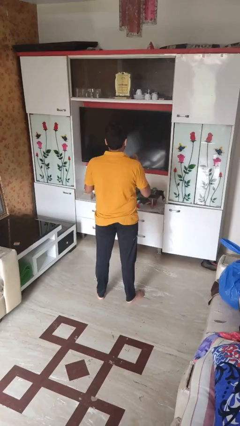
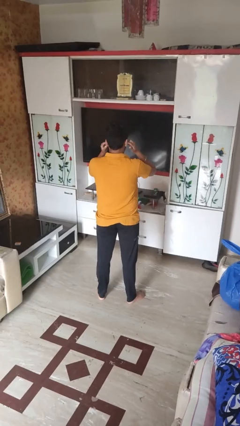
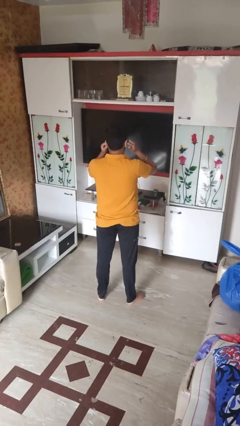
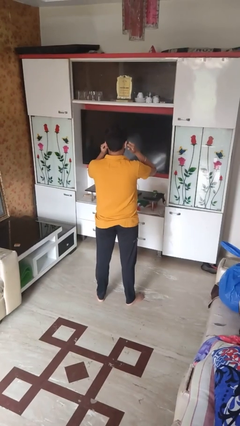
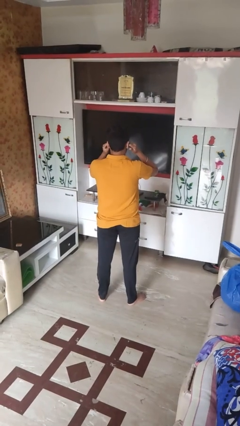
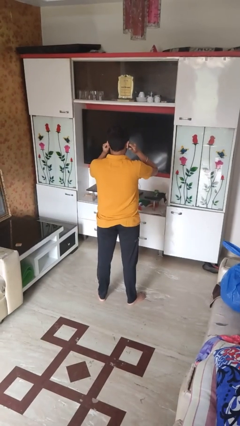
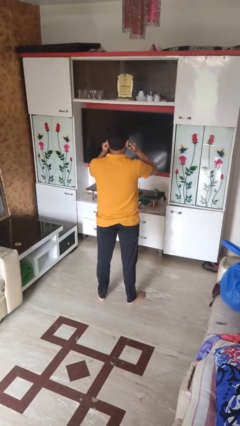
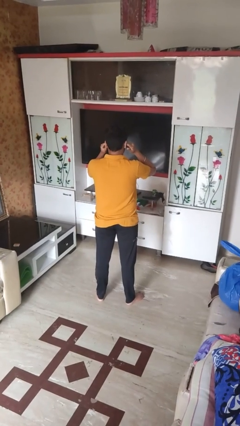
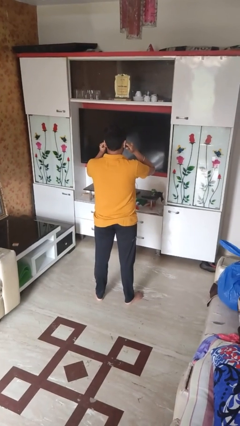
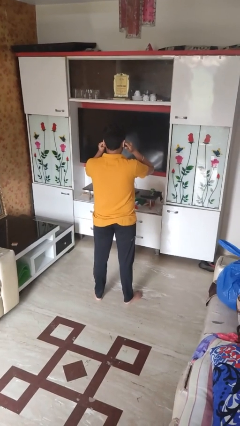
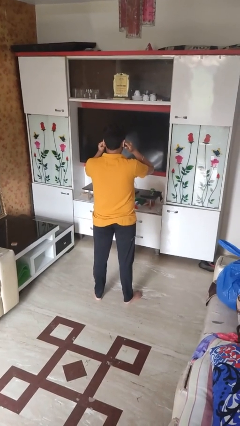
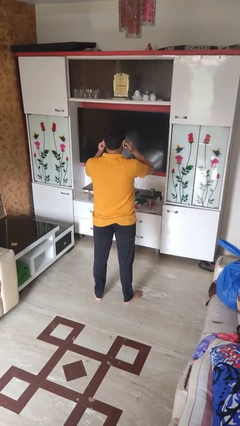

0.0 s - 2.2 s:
person puts fingers in ear

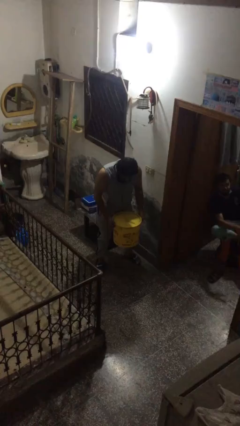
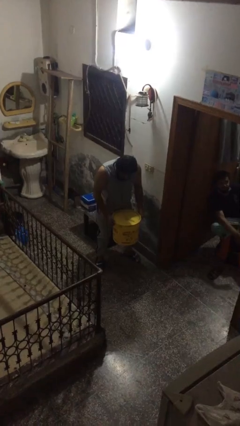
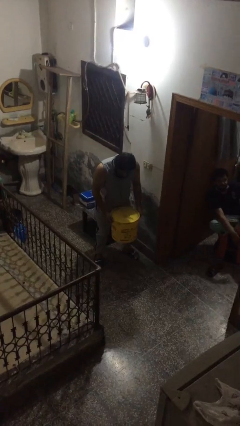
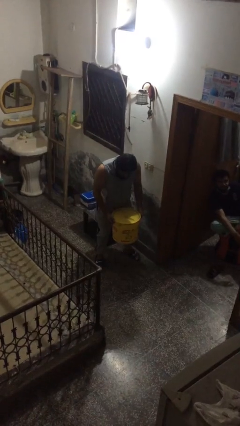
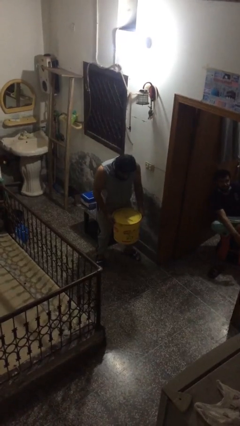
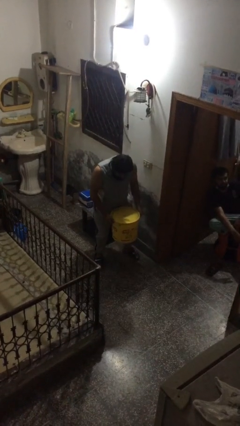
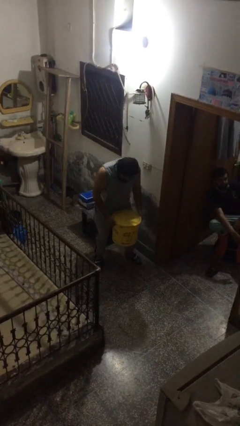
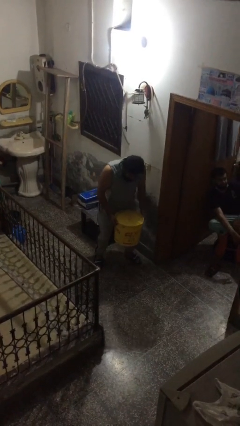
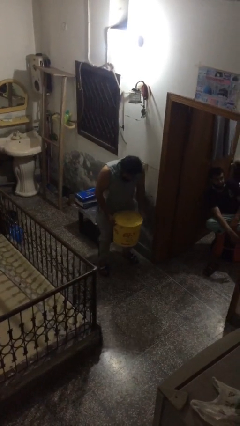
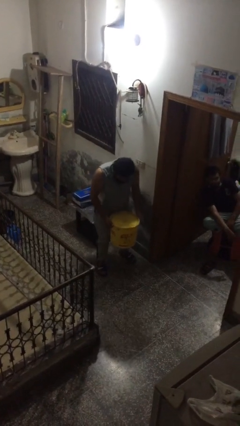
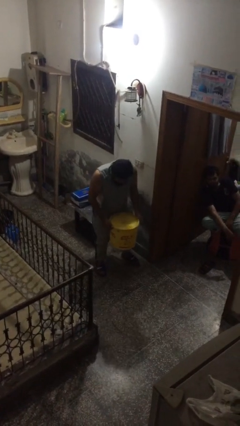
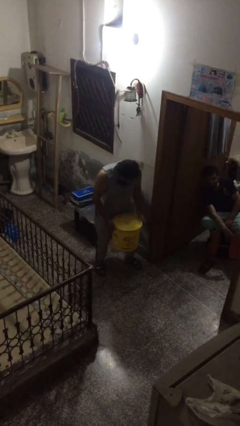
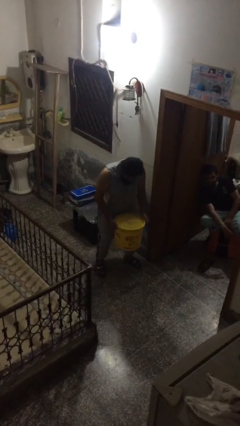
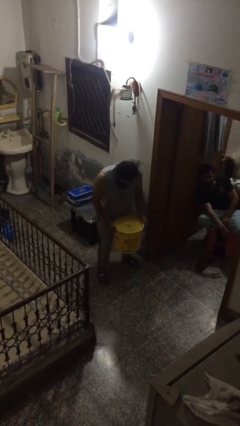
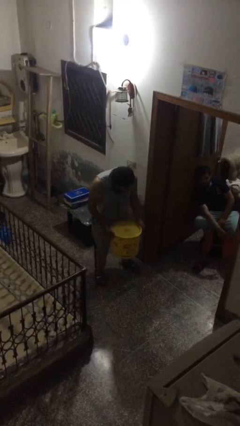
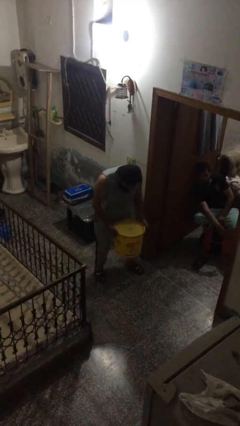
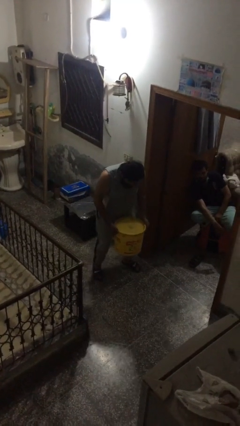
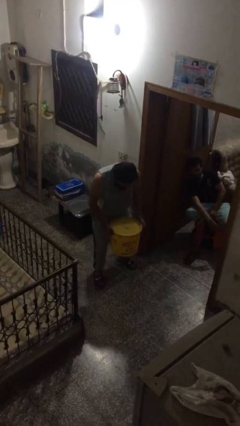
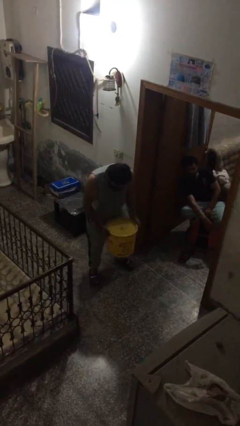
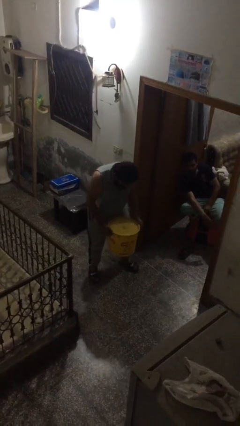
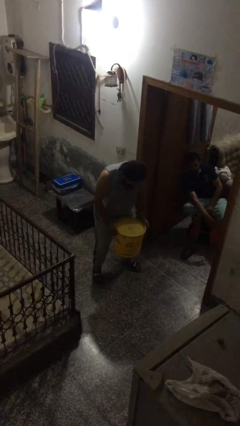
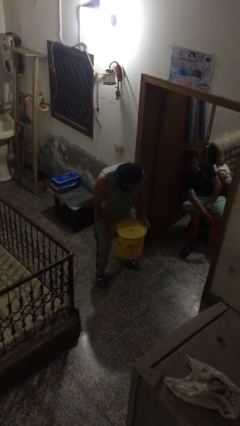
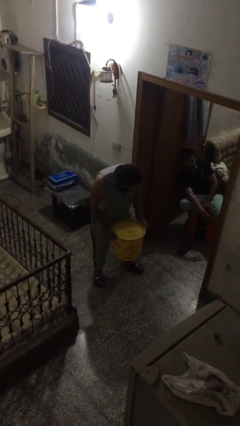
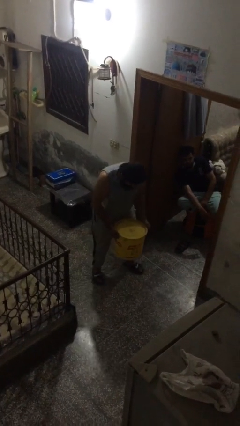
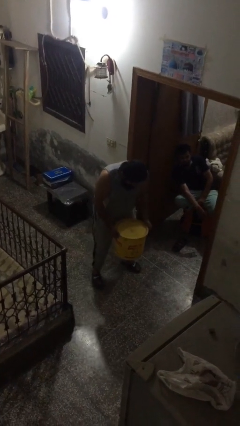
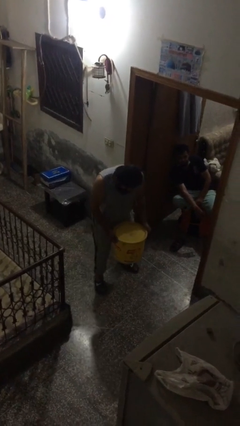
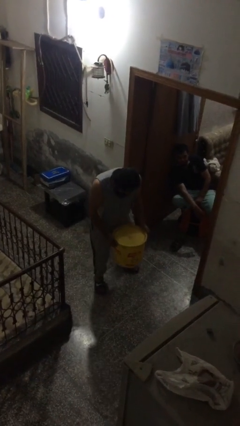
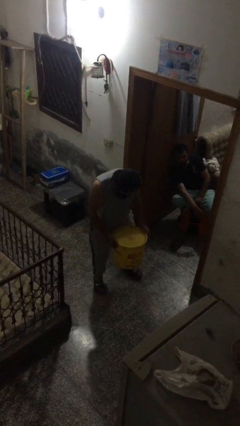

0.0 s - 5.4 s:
person carries heavy object

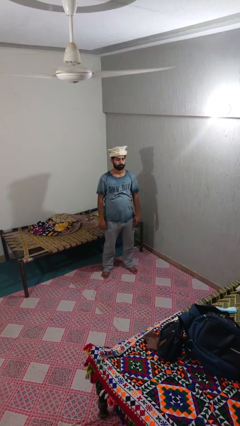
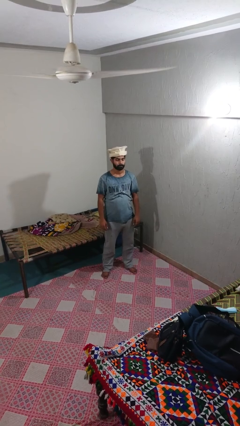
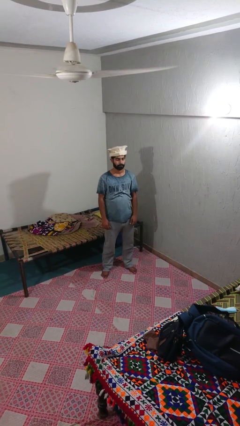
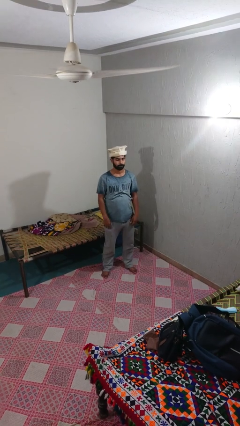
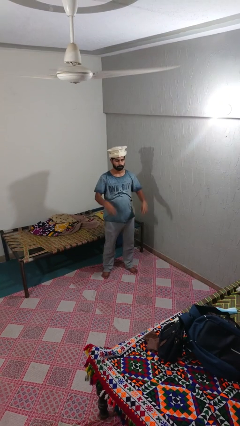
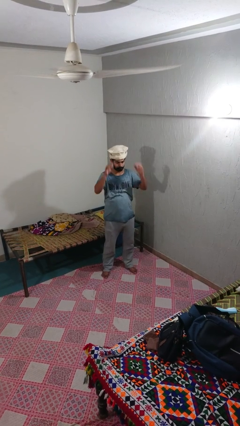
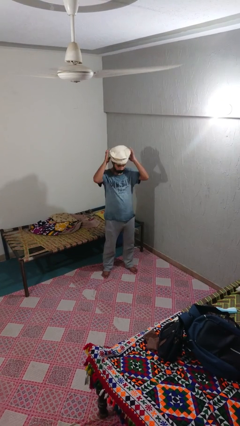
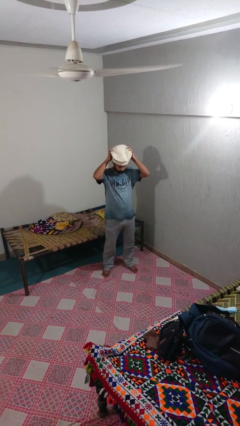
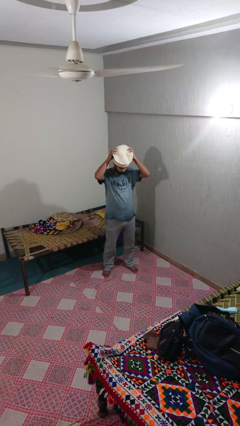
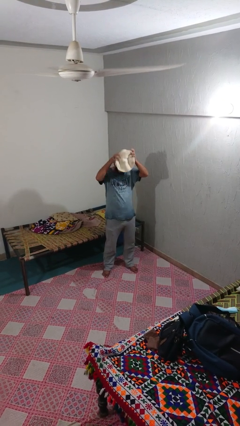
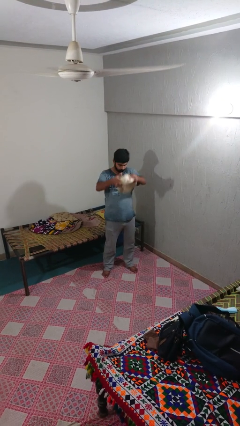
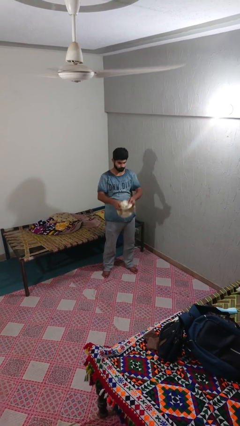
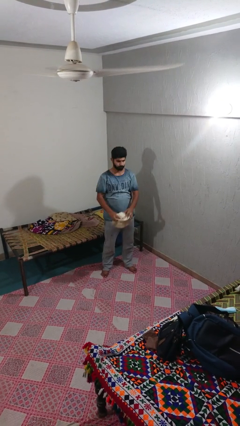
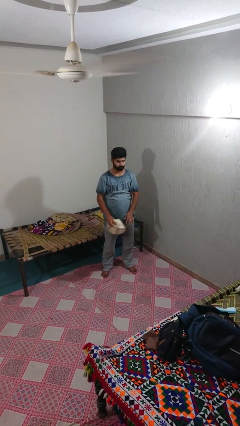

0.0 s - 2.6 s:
person takes off hat

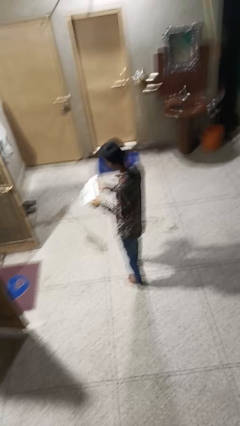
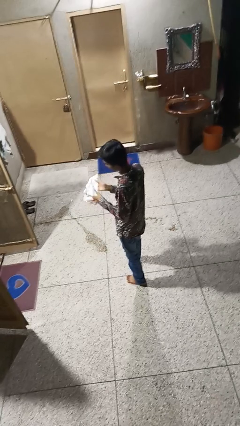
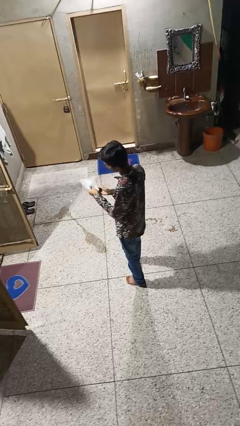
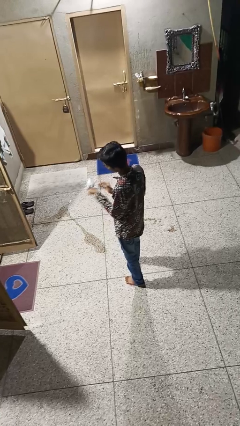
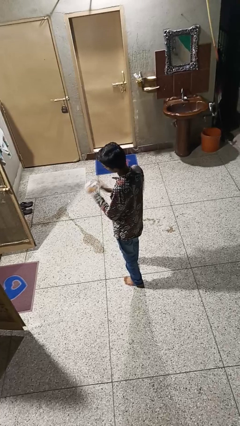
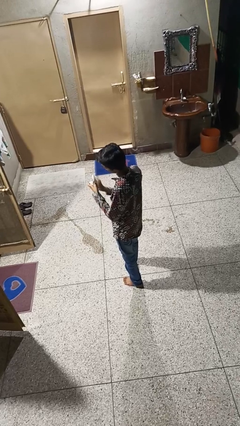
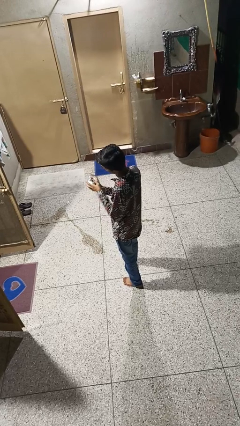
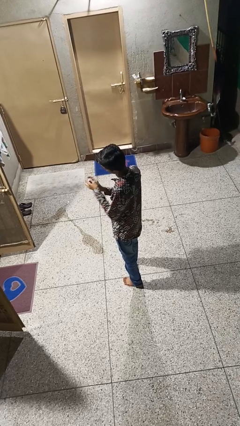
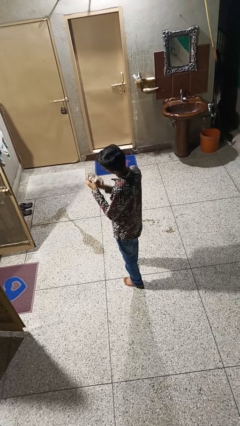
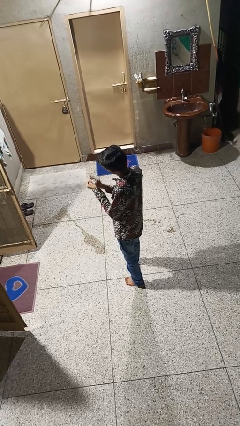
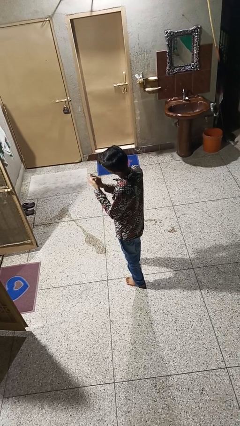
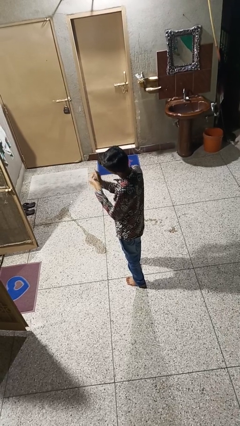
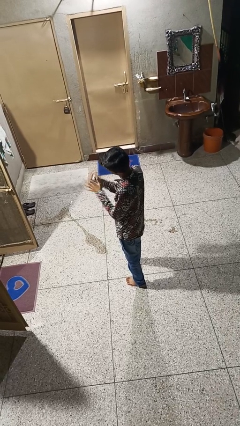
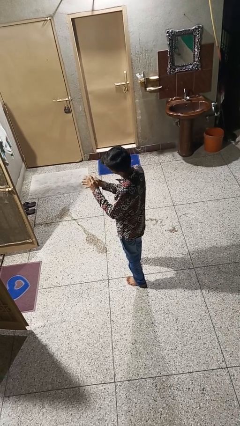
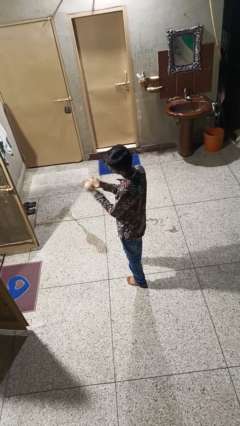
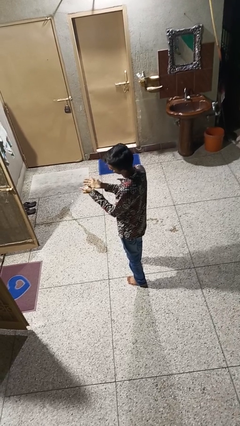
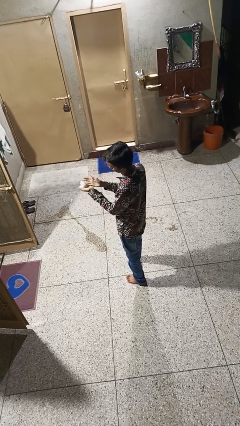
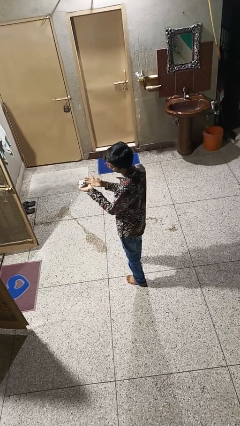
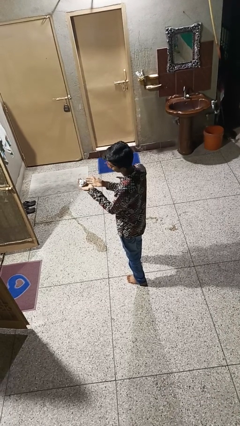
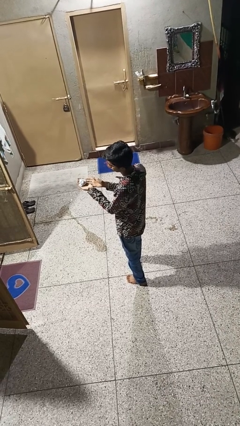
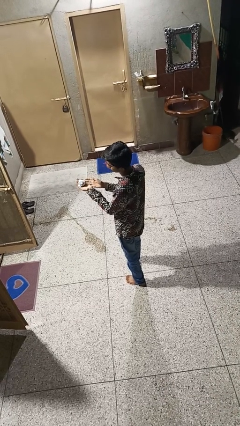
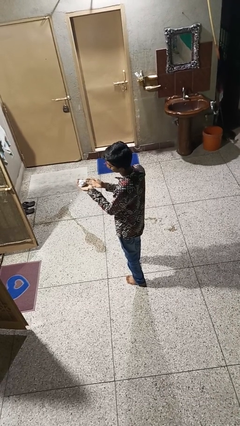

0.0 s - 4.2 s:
person crumples paper

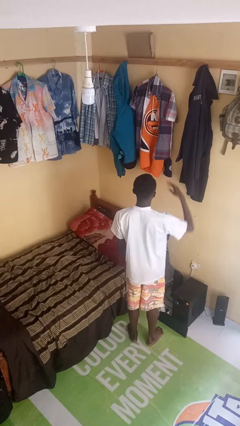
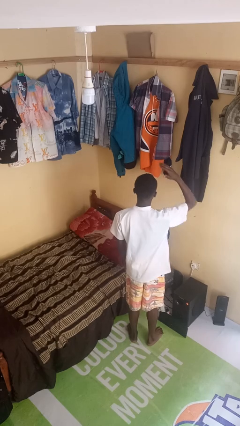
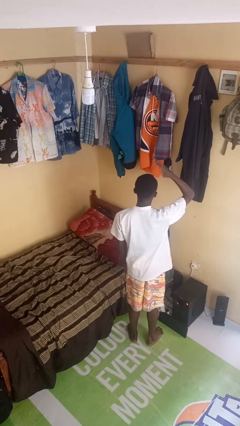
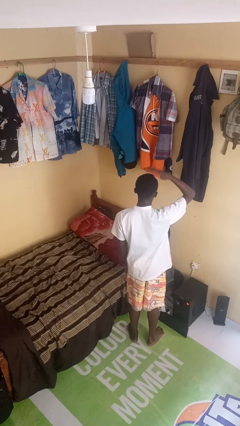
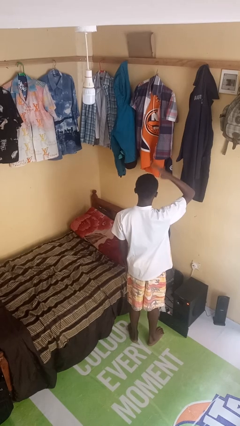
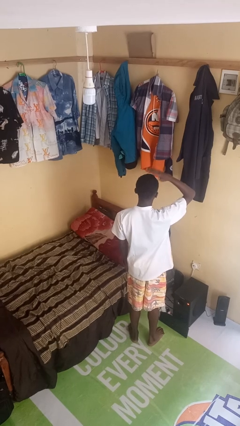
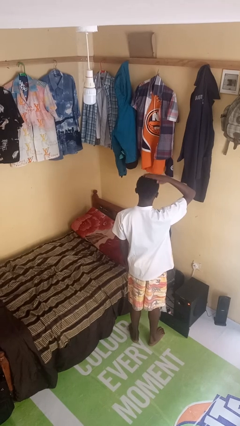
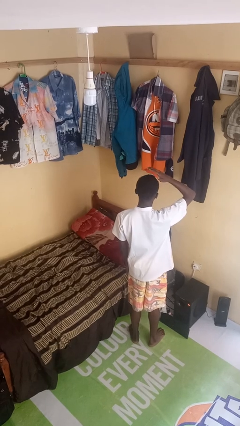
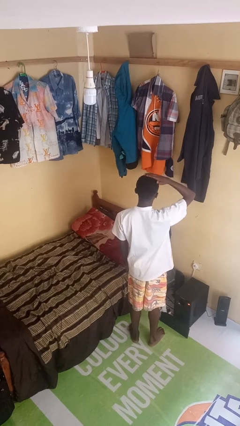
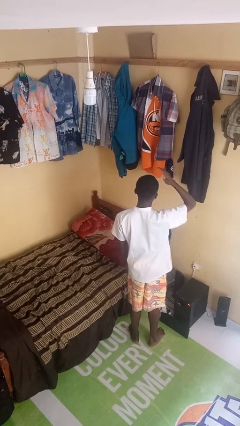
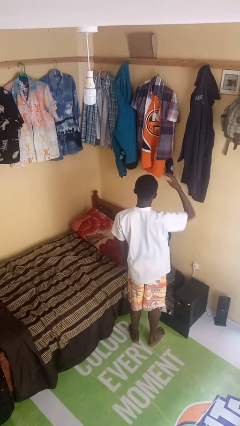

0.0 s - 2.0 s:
person pats head

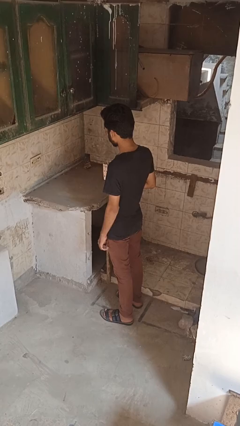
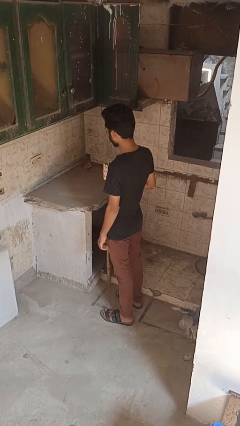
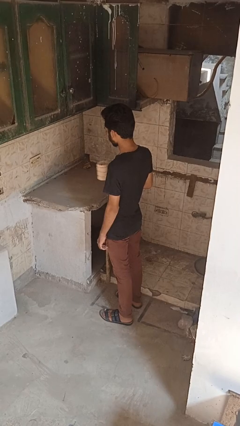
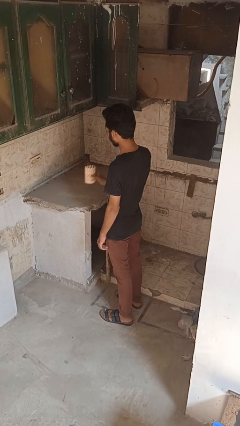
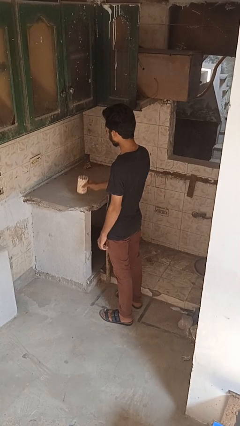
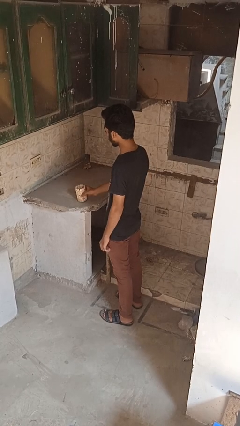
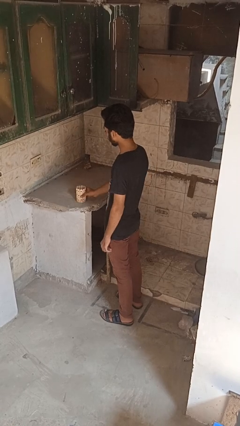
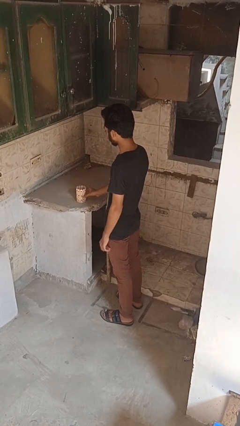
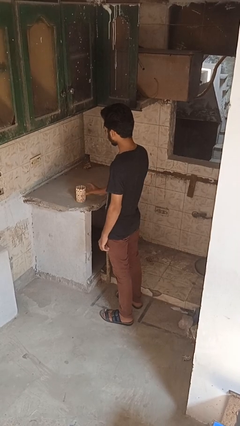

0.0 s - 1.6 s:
person puts down object on countertop
